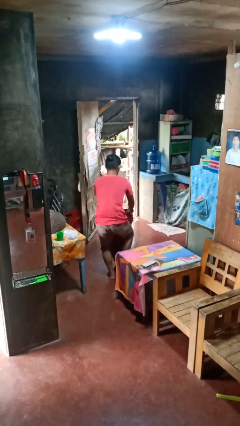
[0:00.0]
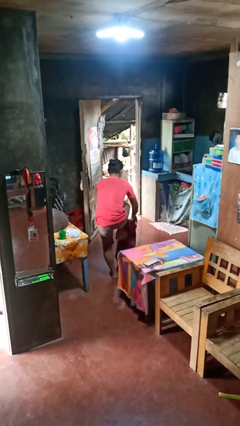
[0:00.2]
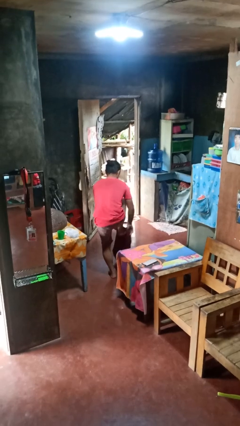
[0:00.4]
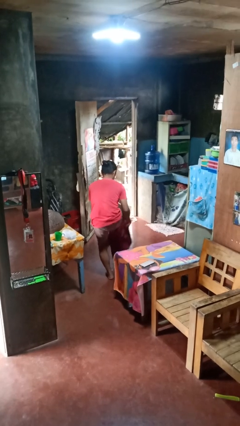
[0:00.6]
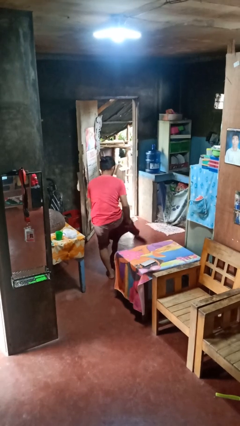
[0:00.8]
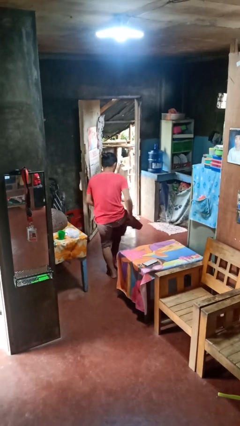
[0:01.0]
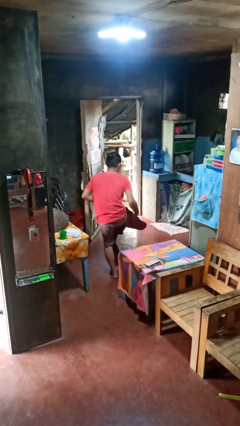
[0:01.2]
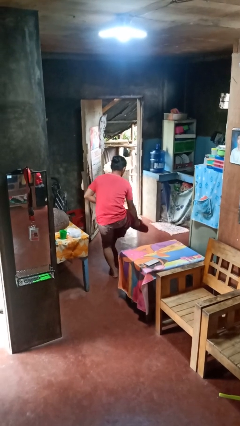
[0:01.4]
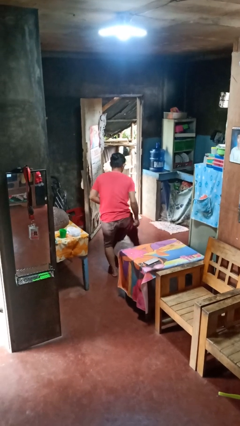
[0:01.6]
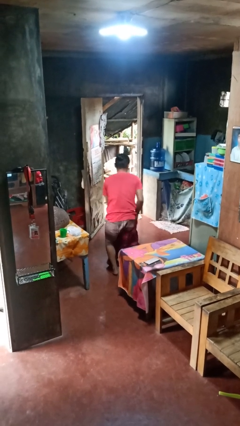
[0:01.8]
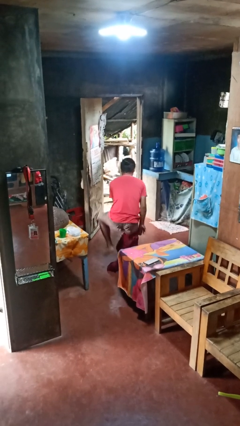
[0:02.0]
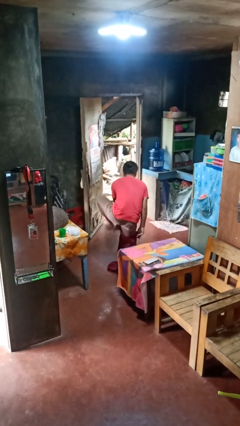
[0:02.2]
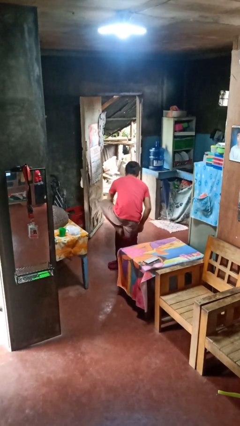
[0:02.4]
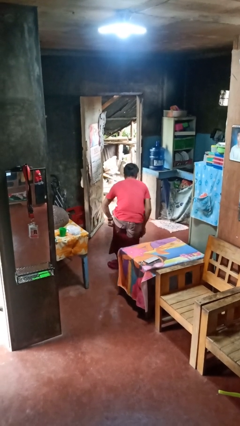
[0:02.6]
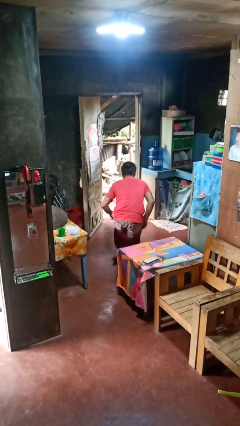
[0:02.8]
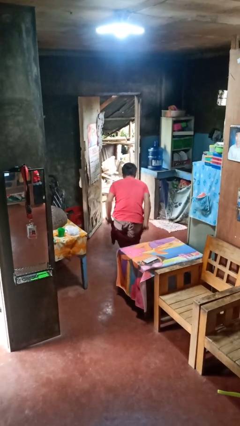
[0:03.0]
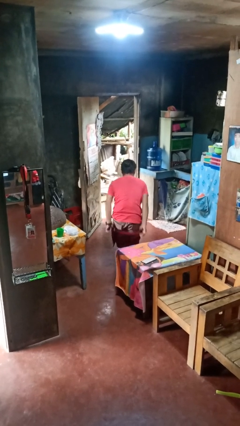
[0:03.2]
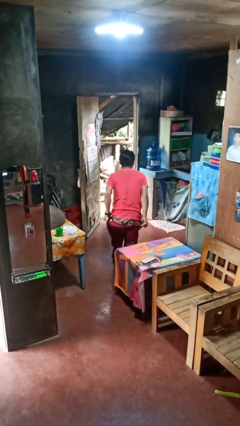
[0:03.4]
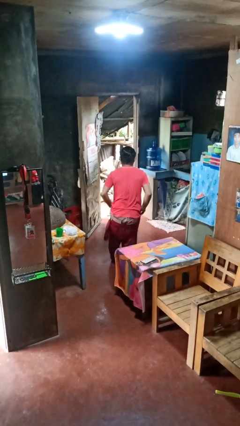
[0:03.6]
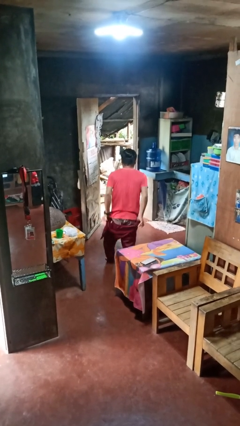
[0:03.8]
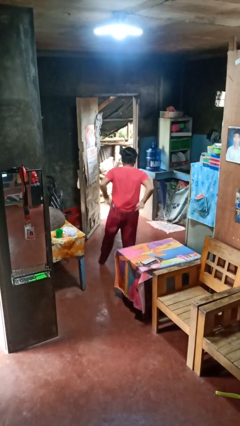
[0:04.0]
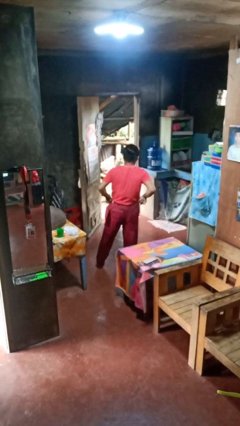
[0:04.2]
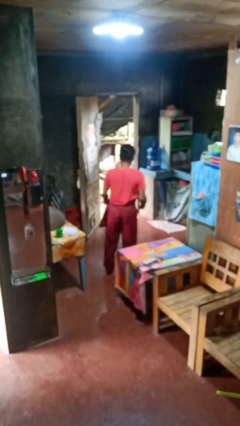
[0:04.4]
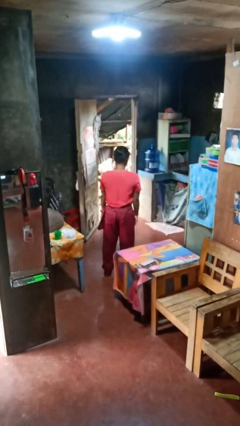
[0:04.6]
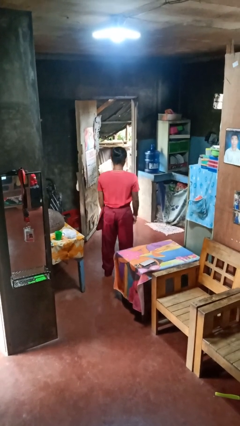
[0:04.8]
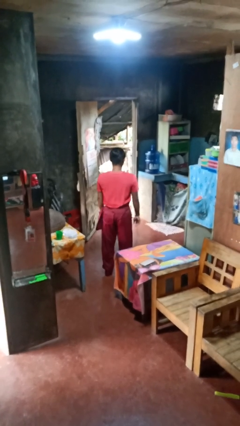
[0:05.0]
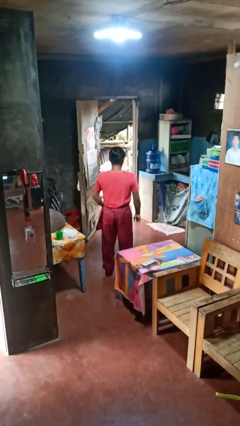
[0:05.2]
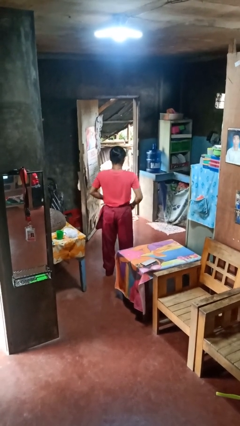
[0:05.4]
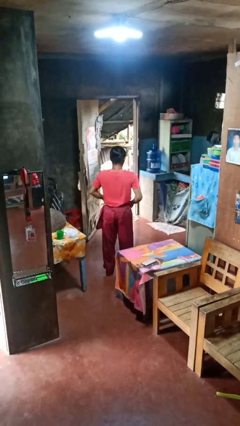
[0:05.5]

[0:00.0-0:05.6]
person puts on pants

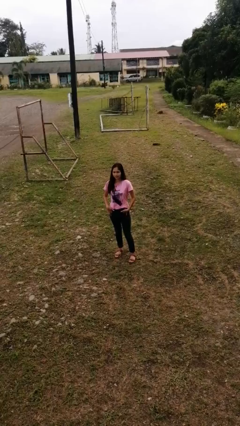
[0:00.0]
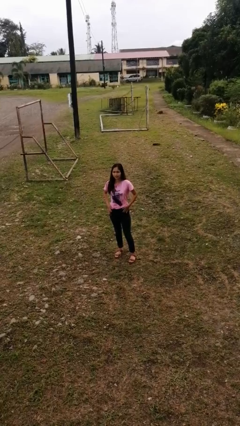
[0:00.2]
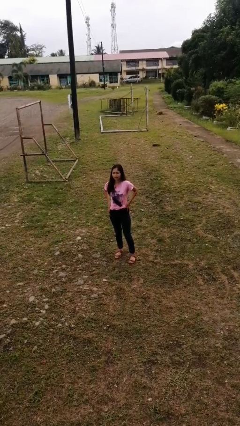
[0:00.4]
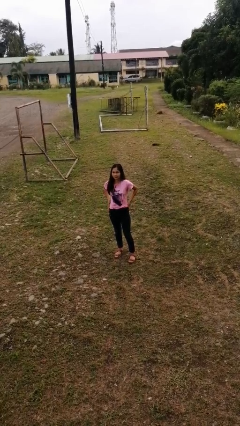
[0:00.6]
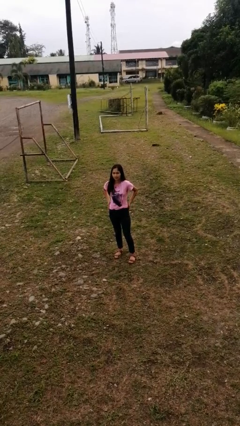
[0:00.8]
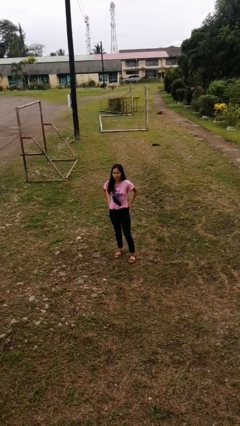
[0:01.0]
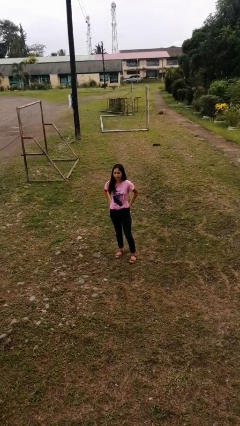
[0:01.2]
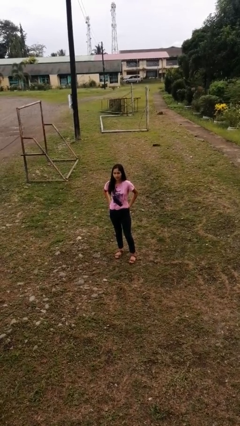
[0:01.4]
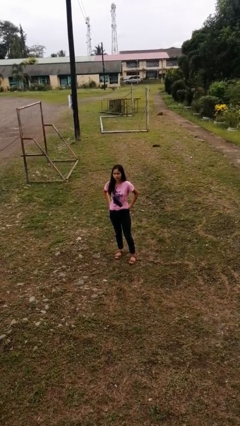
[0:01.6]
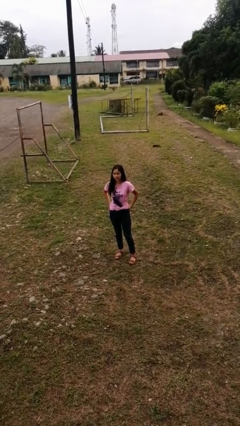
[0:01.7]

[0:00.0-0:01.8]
person puts hands in back pockets

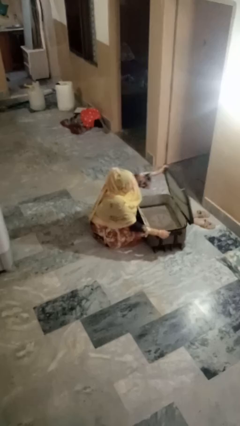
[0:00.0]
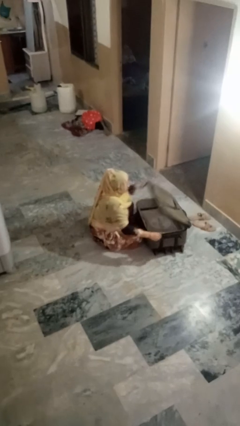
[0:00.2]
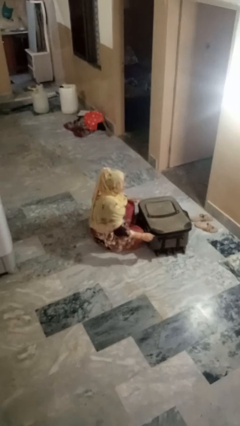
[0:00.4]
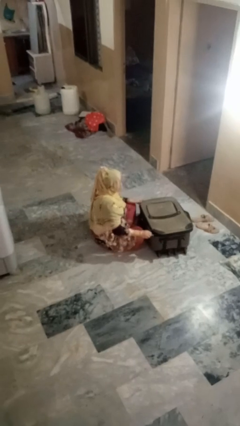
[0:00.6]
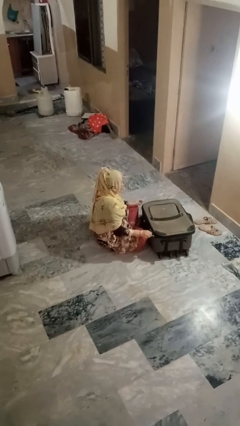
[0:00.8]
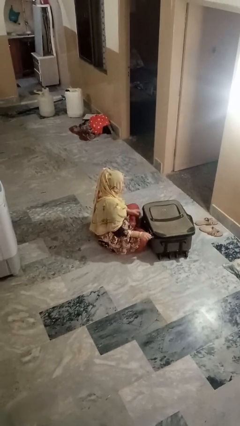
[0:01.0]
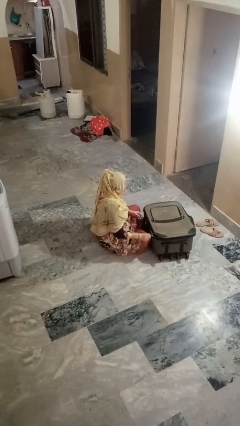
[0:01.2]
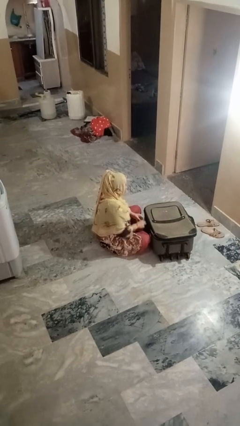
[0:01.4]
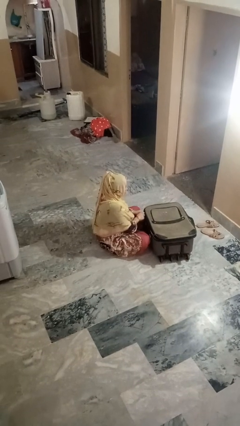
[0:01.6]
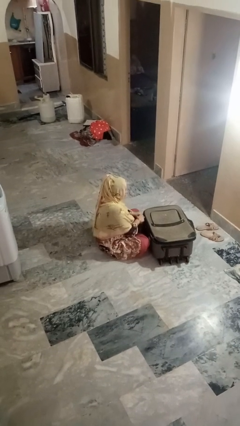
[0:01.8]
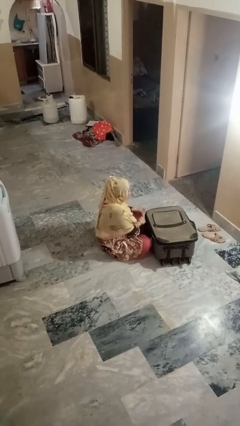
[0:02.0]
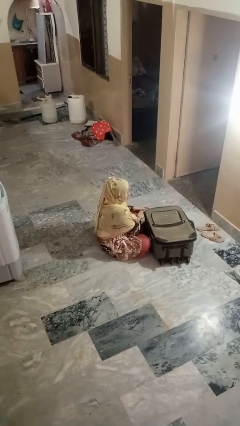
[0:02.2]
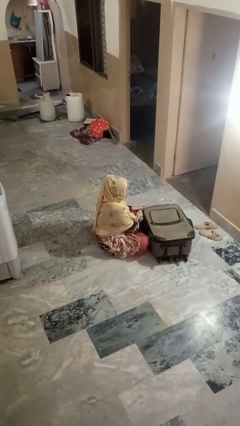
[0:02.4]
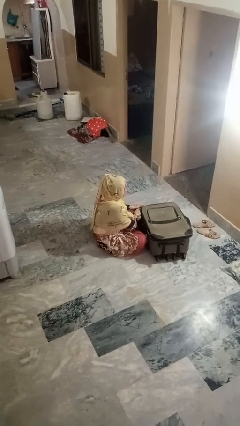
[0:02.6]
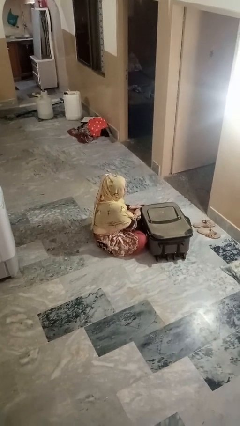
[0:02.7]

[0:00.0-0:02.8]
person closes suitcase

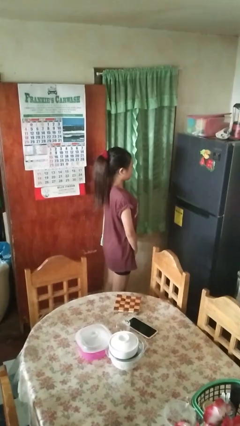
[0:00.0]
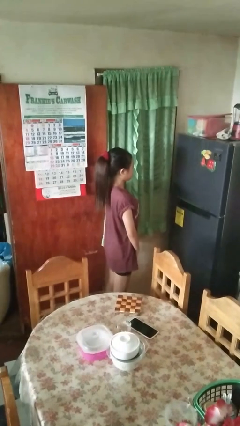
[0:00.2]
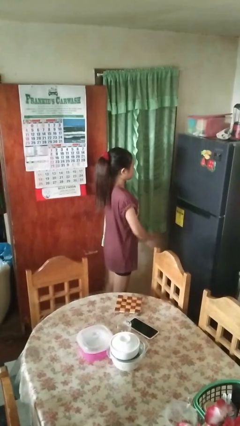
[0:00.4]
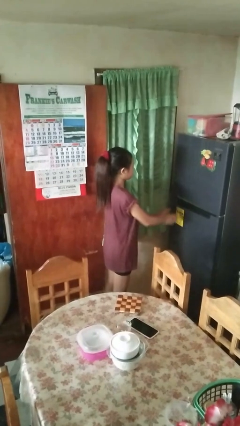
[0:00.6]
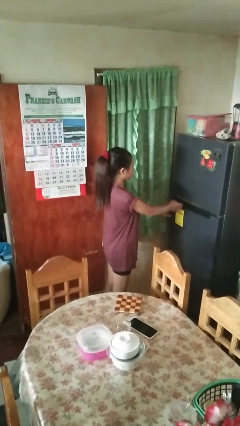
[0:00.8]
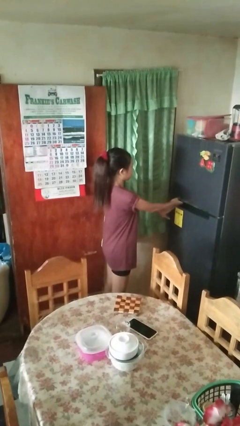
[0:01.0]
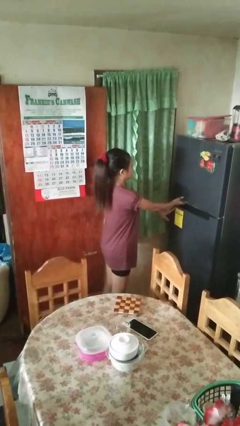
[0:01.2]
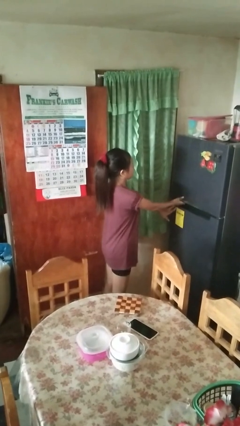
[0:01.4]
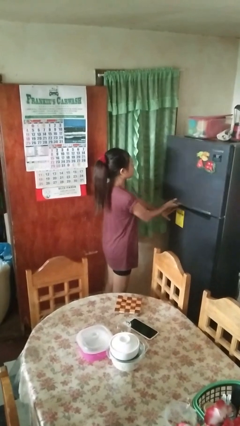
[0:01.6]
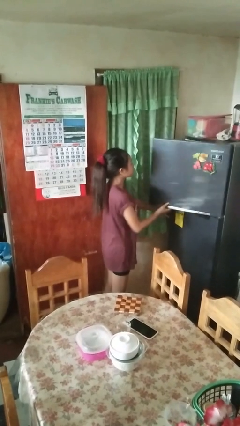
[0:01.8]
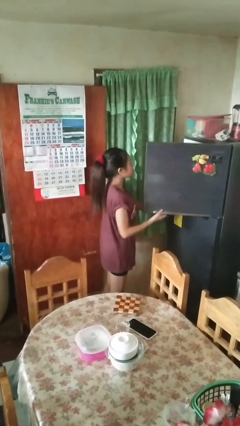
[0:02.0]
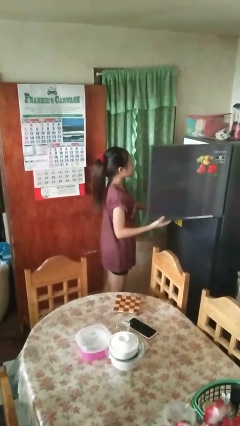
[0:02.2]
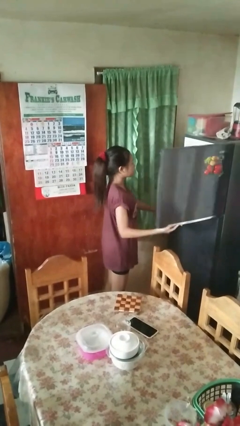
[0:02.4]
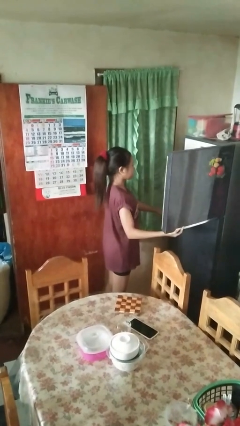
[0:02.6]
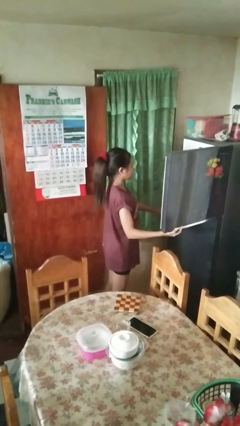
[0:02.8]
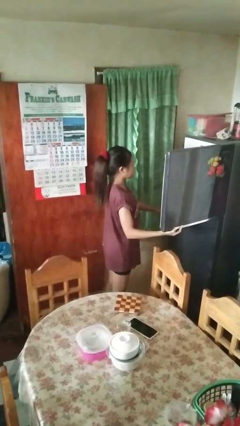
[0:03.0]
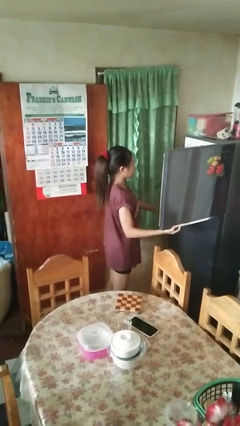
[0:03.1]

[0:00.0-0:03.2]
person opens refrigerator

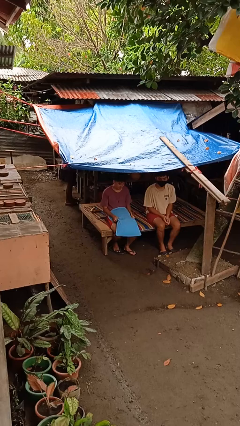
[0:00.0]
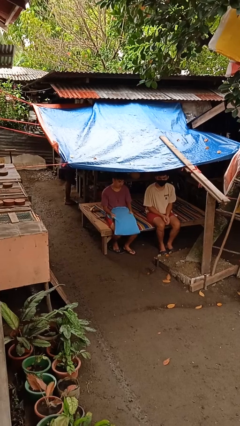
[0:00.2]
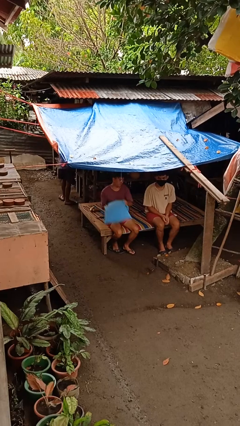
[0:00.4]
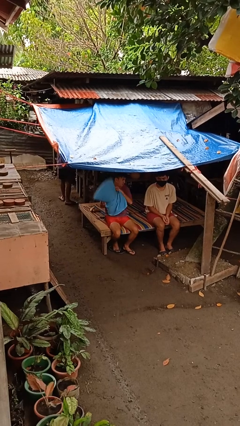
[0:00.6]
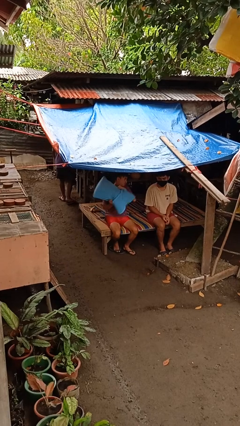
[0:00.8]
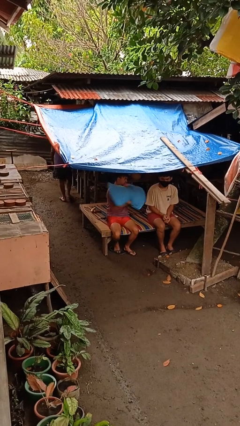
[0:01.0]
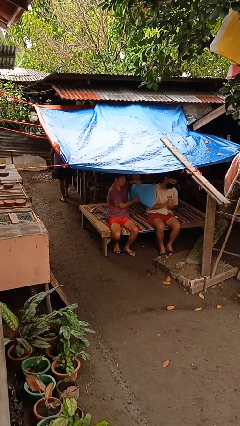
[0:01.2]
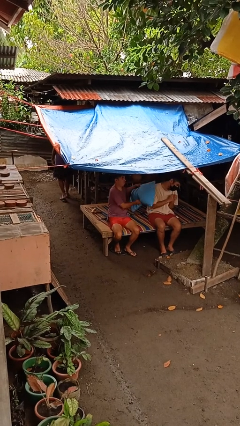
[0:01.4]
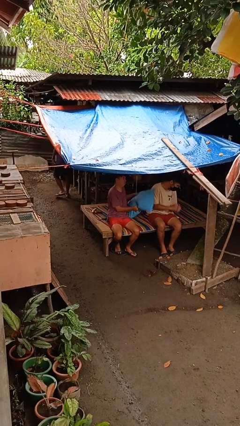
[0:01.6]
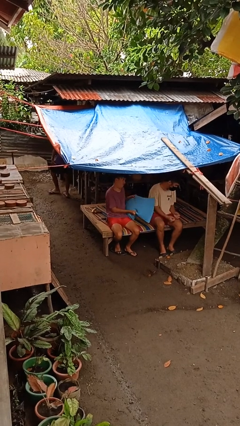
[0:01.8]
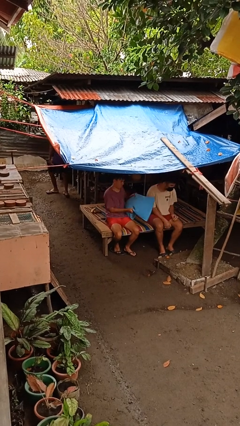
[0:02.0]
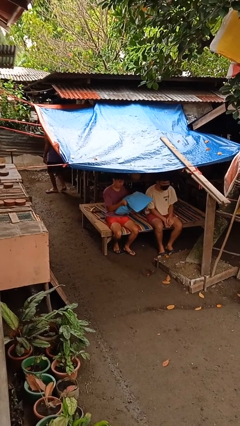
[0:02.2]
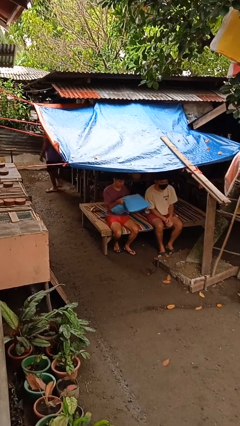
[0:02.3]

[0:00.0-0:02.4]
person hits person with pillow

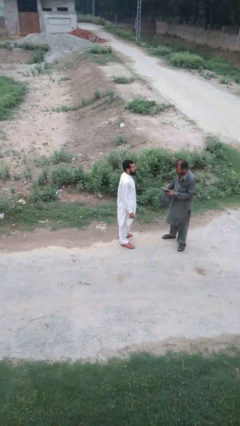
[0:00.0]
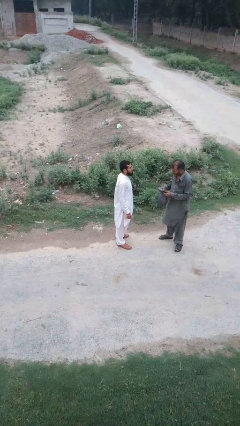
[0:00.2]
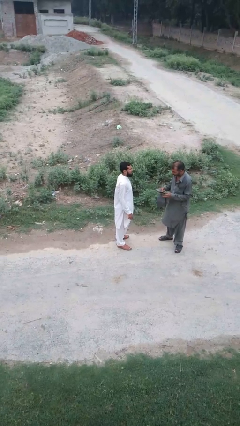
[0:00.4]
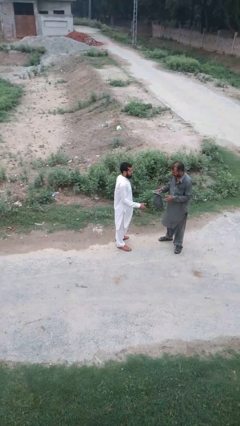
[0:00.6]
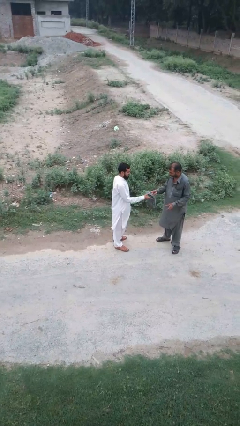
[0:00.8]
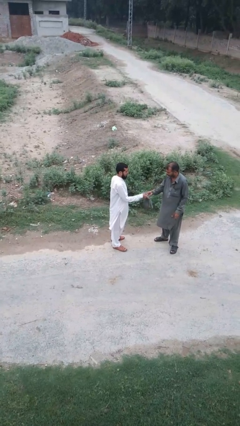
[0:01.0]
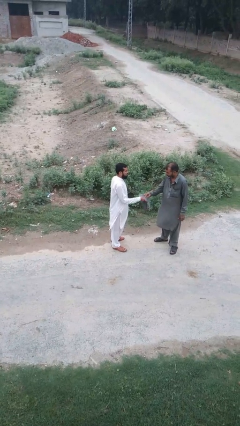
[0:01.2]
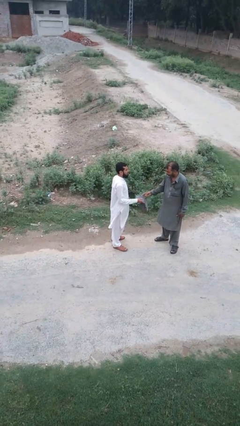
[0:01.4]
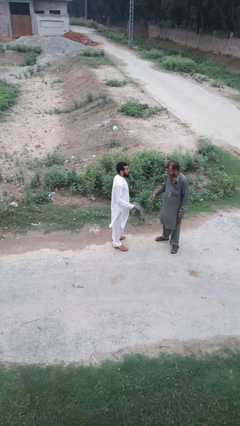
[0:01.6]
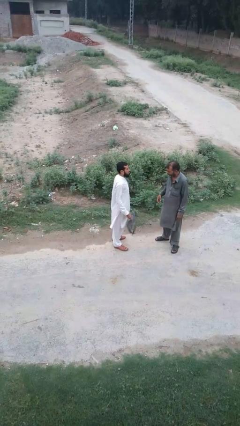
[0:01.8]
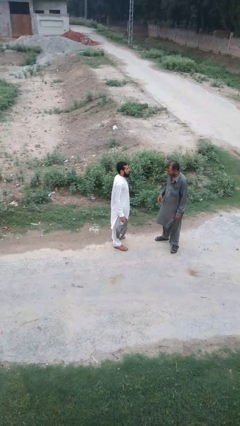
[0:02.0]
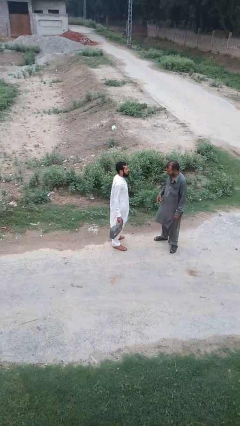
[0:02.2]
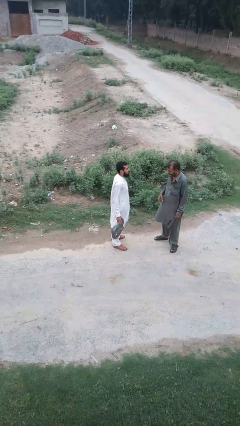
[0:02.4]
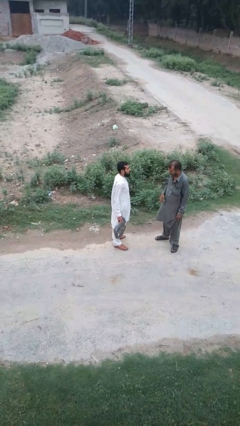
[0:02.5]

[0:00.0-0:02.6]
person transfers object to person
